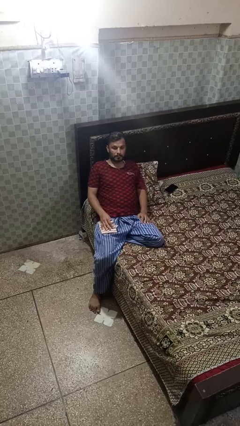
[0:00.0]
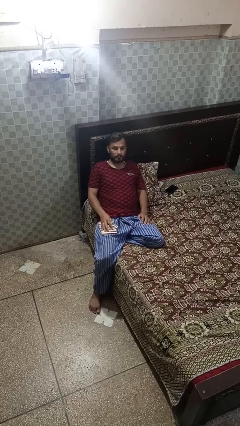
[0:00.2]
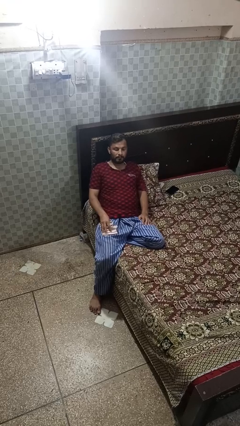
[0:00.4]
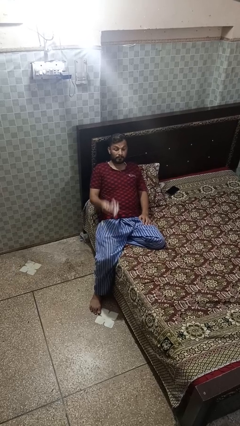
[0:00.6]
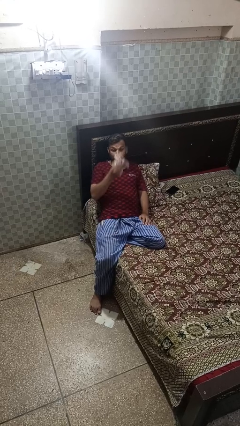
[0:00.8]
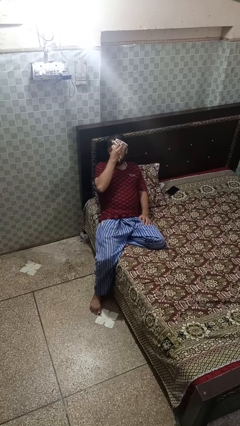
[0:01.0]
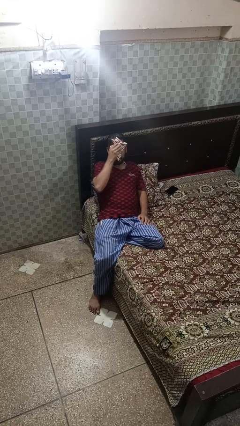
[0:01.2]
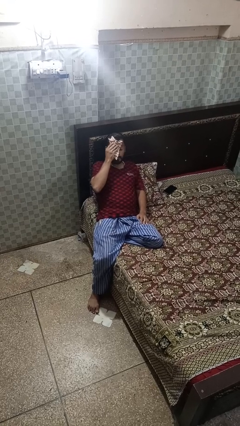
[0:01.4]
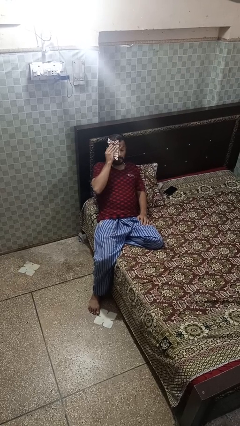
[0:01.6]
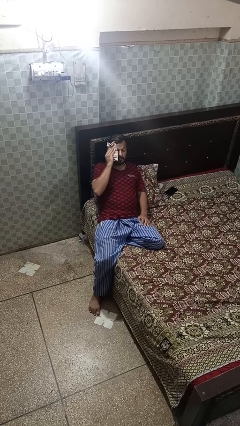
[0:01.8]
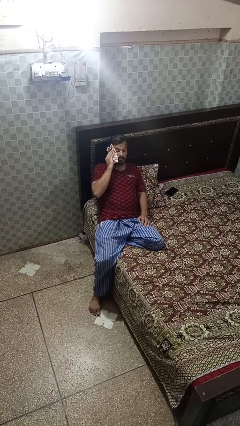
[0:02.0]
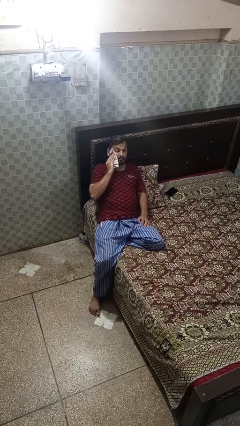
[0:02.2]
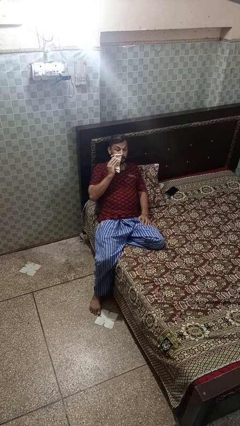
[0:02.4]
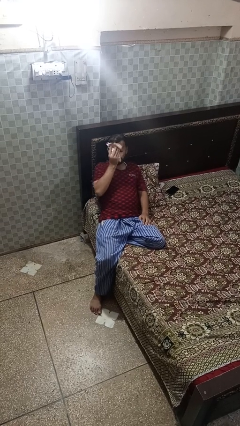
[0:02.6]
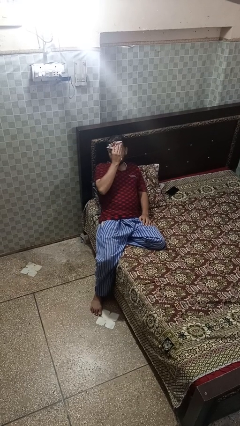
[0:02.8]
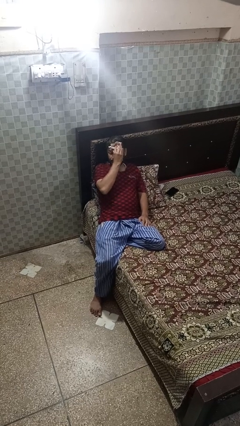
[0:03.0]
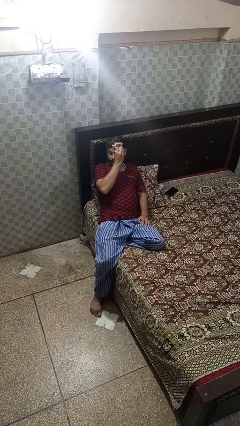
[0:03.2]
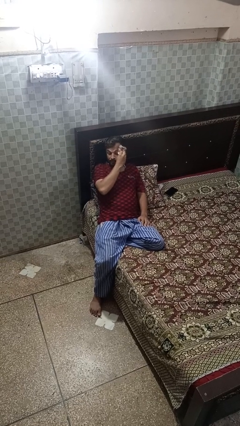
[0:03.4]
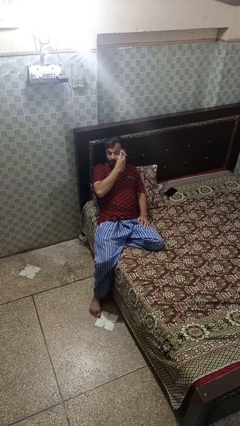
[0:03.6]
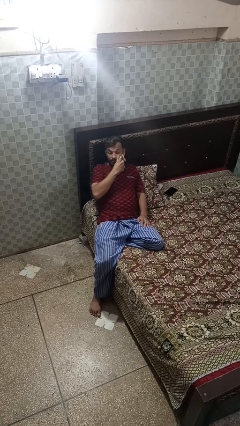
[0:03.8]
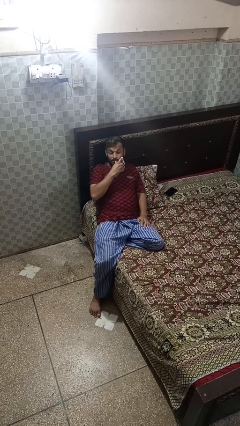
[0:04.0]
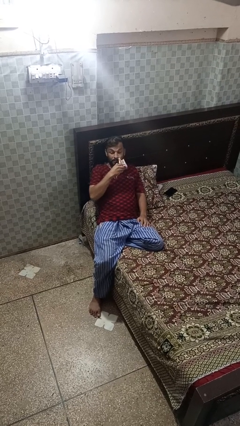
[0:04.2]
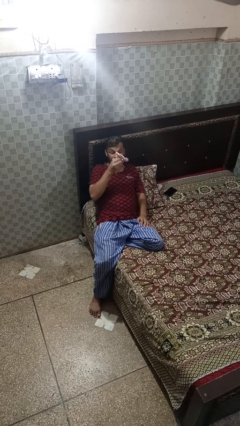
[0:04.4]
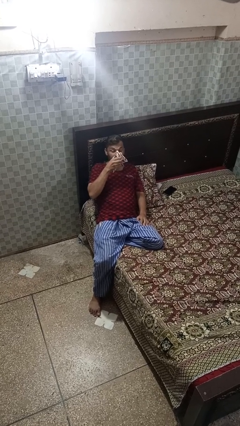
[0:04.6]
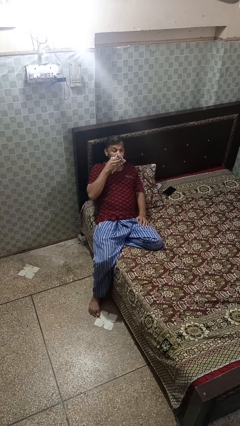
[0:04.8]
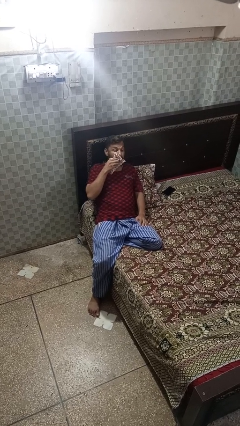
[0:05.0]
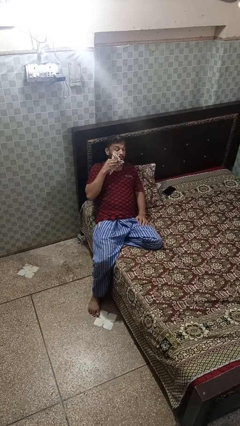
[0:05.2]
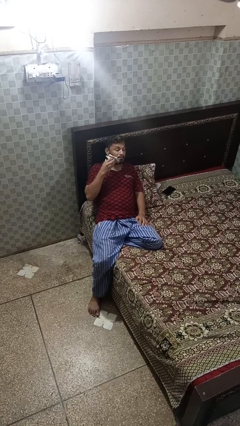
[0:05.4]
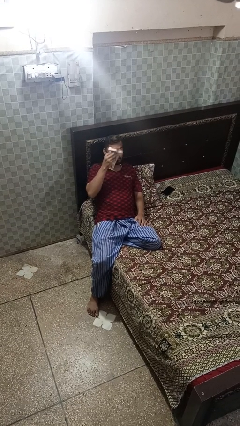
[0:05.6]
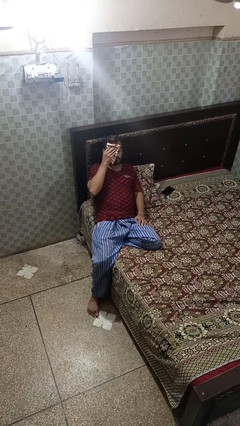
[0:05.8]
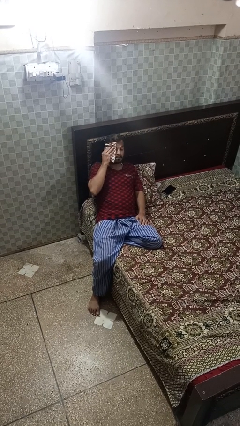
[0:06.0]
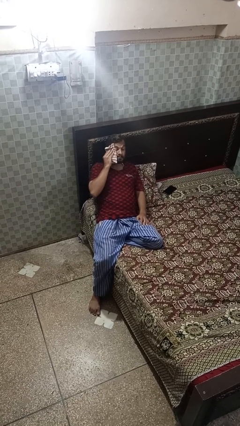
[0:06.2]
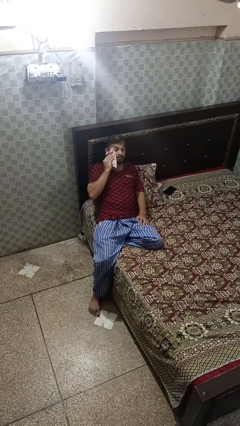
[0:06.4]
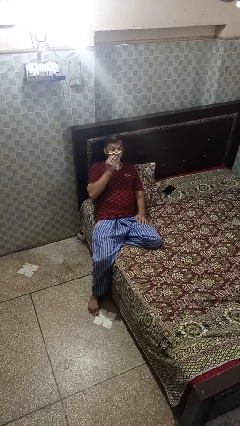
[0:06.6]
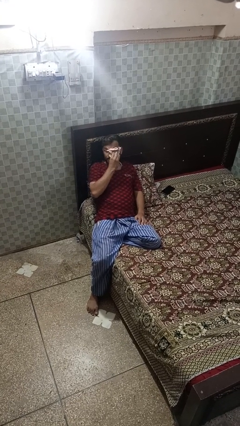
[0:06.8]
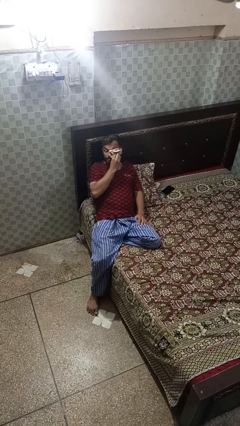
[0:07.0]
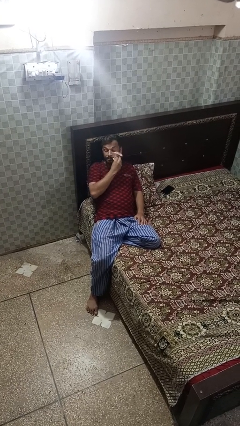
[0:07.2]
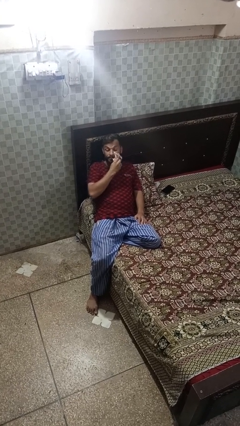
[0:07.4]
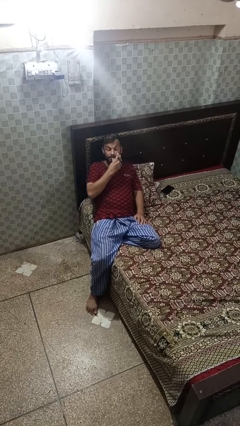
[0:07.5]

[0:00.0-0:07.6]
person wipes mouth with napkin

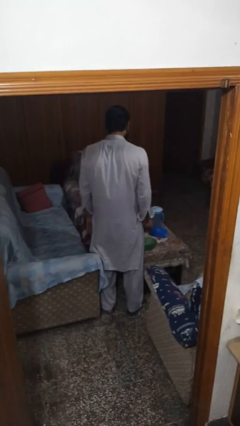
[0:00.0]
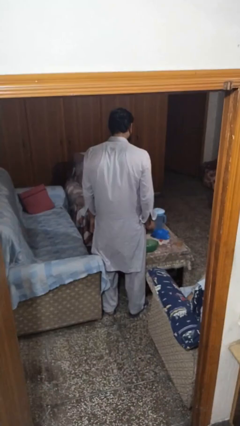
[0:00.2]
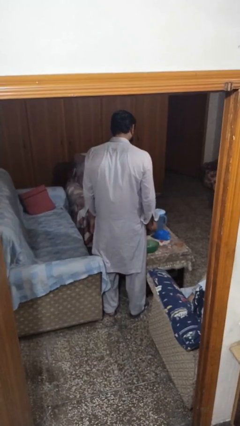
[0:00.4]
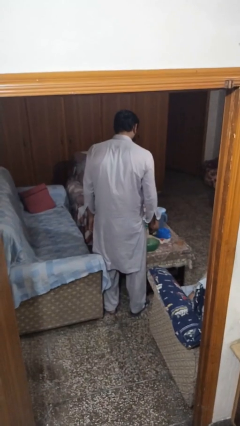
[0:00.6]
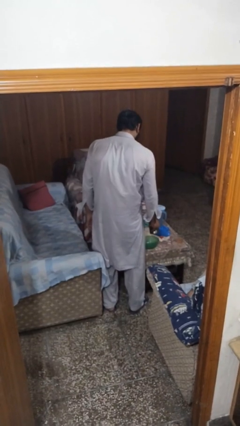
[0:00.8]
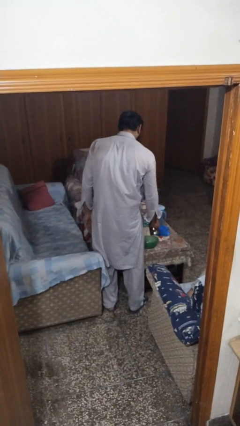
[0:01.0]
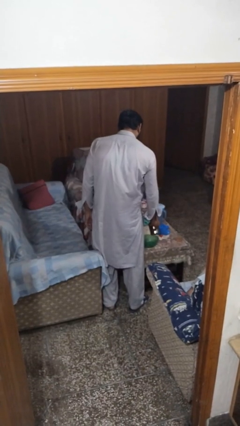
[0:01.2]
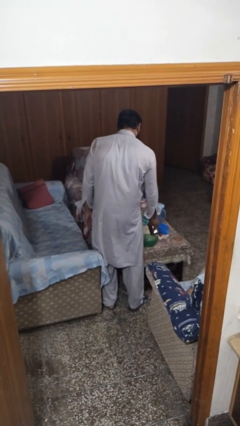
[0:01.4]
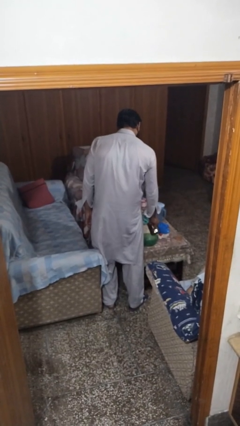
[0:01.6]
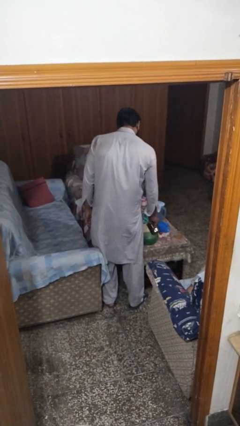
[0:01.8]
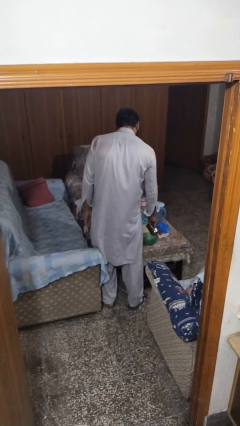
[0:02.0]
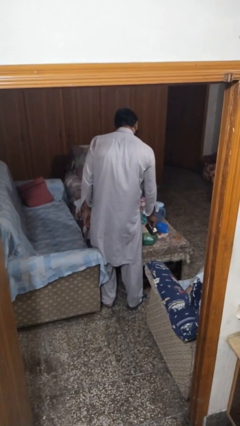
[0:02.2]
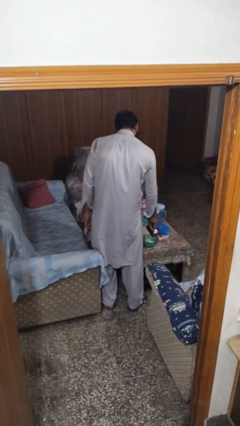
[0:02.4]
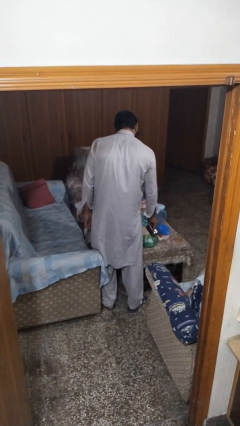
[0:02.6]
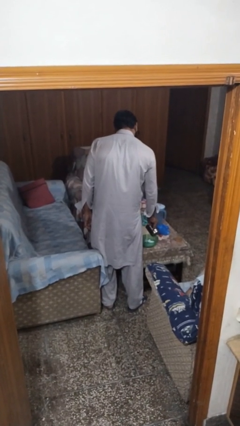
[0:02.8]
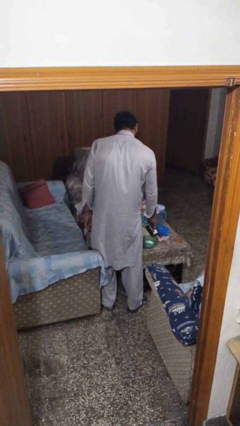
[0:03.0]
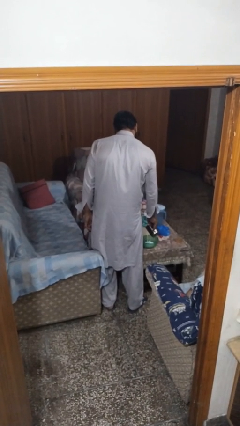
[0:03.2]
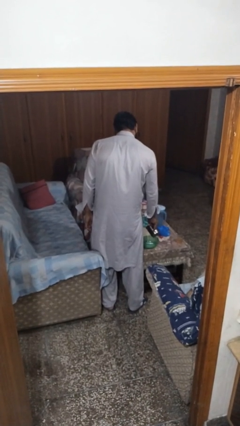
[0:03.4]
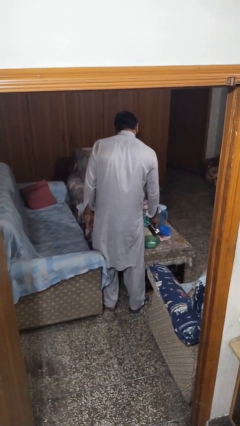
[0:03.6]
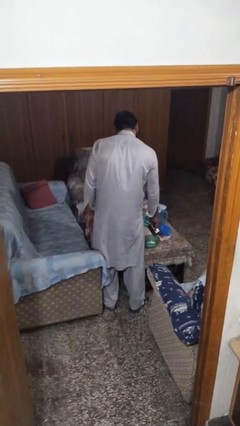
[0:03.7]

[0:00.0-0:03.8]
person pours into bowl

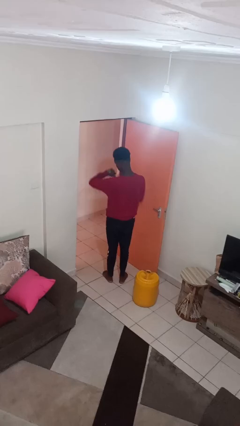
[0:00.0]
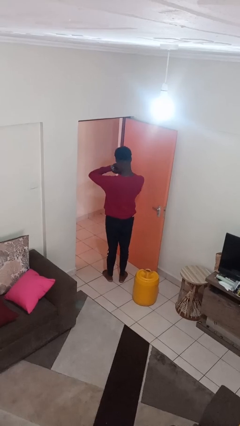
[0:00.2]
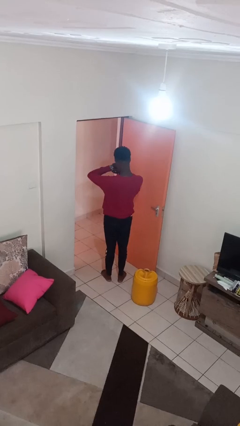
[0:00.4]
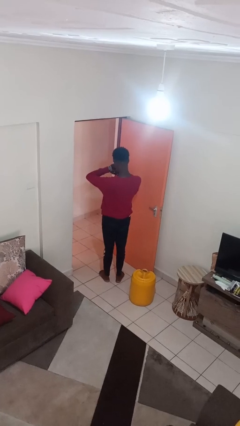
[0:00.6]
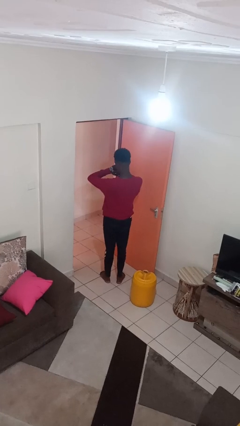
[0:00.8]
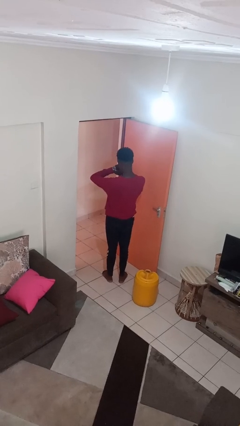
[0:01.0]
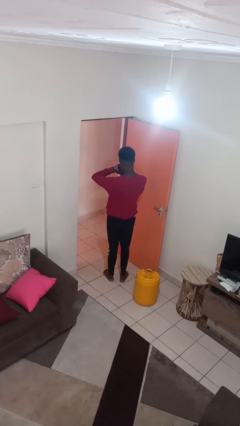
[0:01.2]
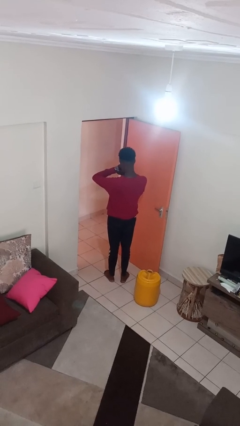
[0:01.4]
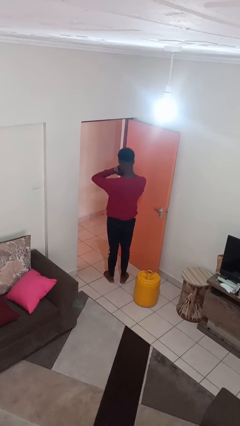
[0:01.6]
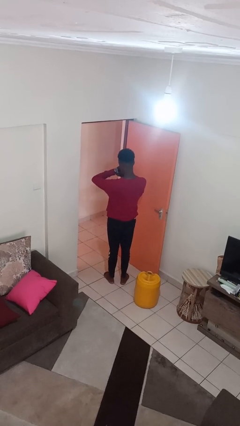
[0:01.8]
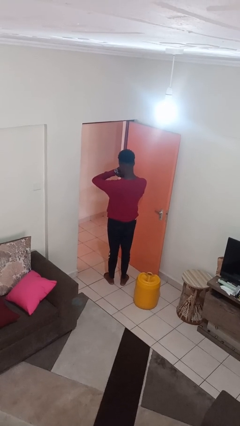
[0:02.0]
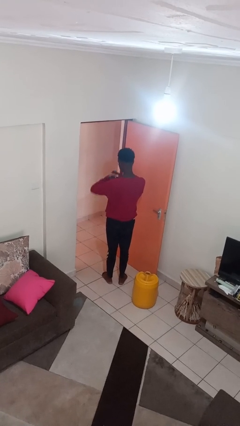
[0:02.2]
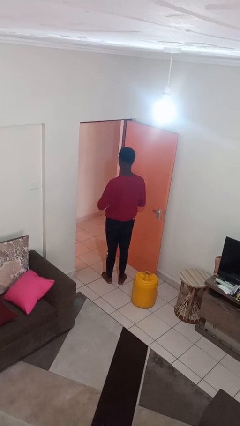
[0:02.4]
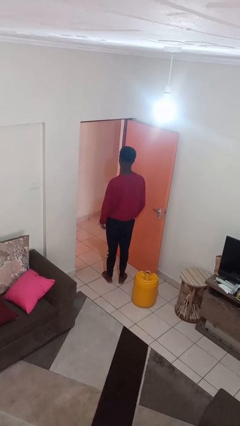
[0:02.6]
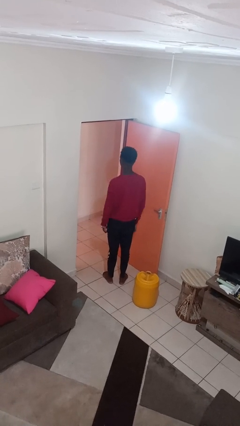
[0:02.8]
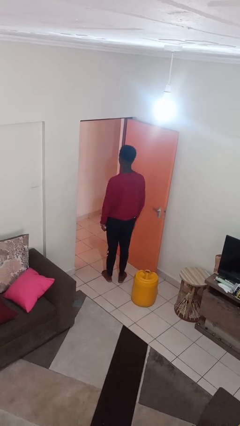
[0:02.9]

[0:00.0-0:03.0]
person looks at wristwatch

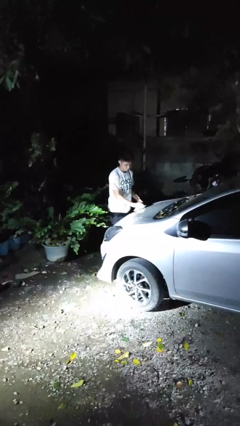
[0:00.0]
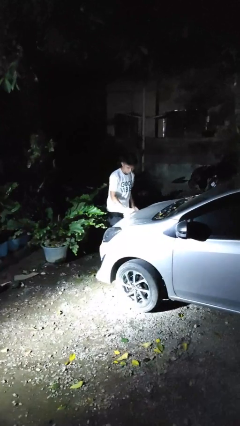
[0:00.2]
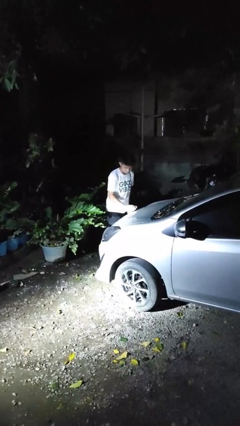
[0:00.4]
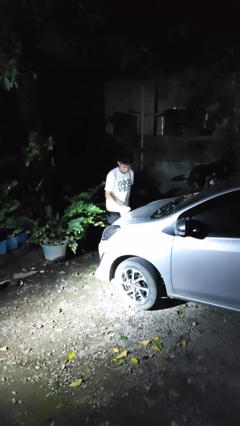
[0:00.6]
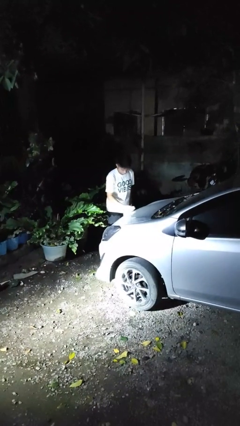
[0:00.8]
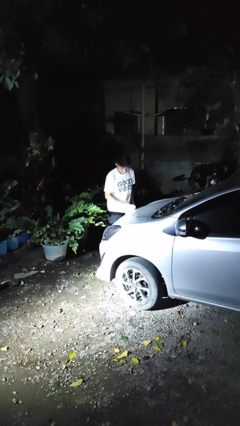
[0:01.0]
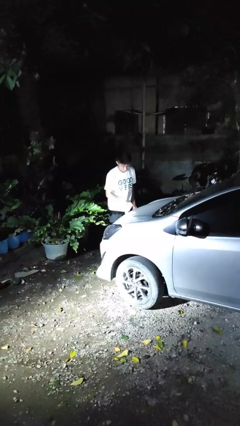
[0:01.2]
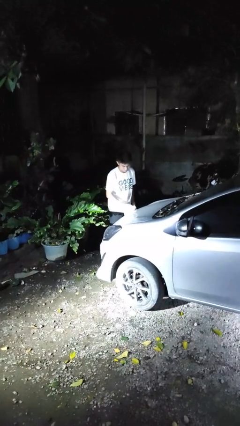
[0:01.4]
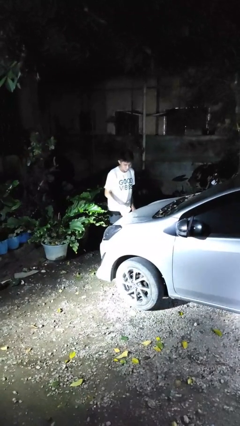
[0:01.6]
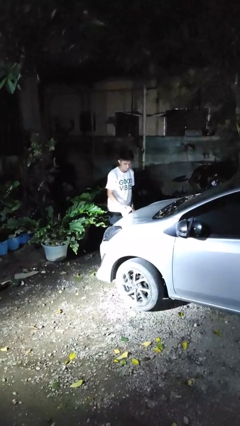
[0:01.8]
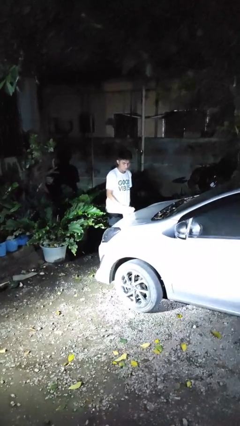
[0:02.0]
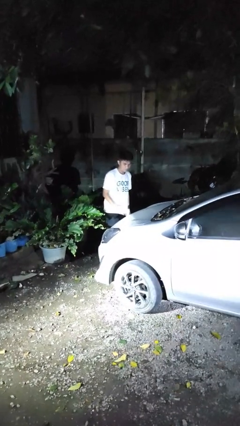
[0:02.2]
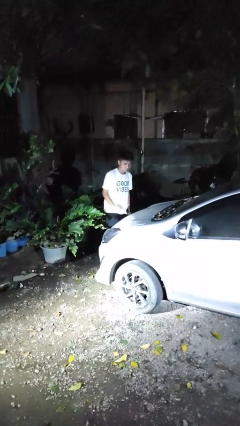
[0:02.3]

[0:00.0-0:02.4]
person polishes car with rag

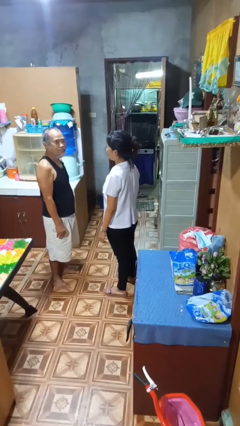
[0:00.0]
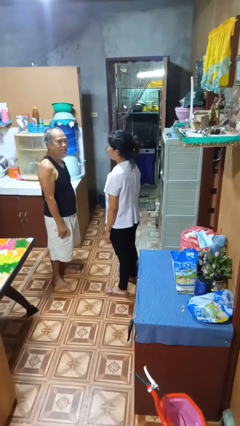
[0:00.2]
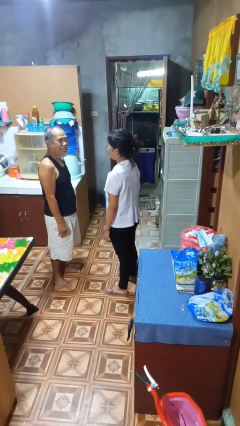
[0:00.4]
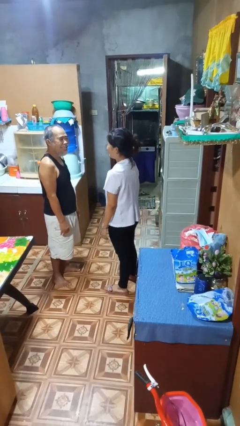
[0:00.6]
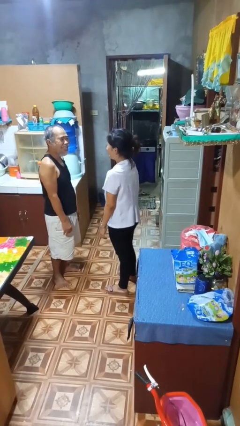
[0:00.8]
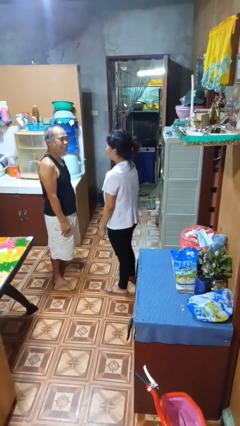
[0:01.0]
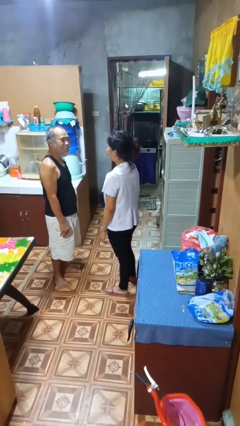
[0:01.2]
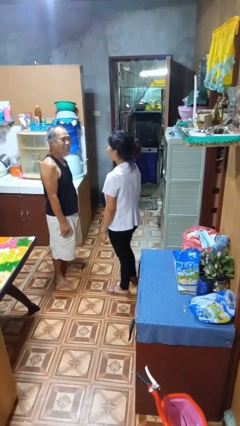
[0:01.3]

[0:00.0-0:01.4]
person laughs with person
